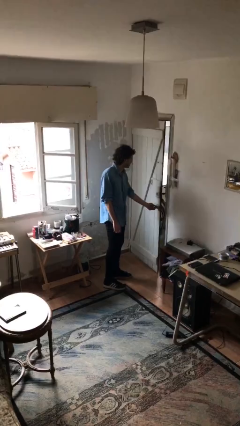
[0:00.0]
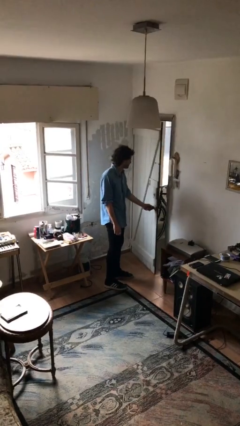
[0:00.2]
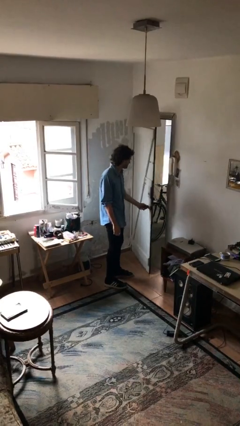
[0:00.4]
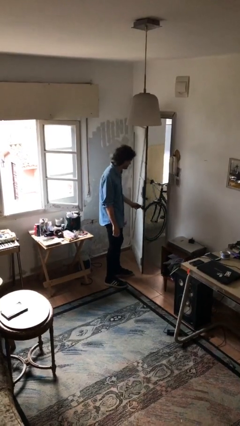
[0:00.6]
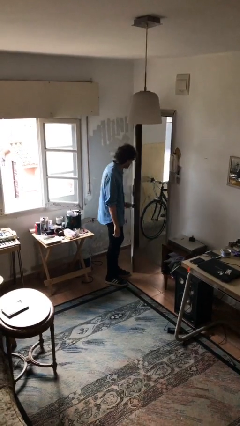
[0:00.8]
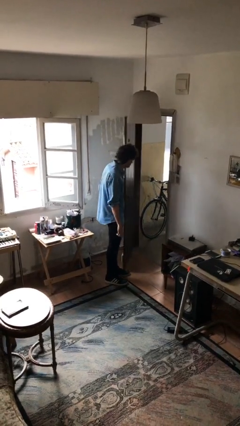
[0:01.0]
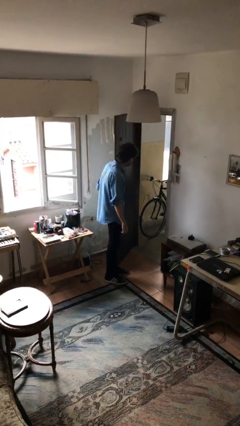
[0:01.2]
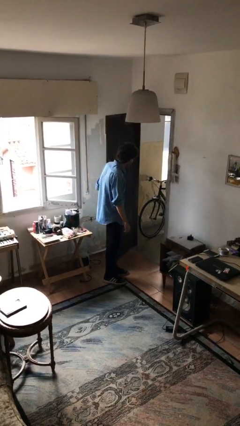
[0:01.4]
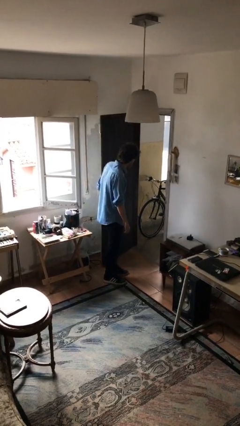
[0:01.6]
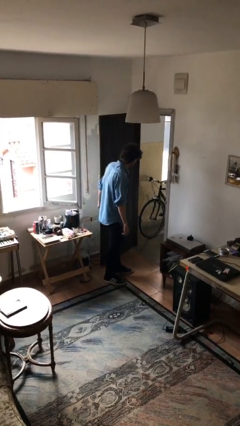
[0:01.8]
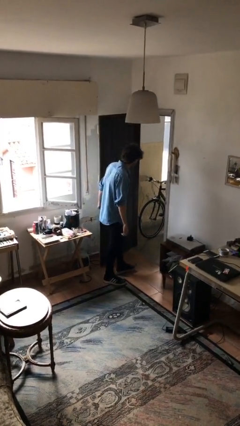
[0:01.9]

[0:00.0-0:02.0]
person opens facility door

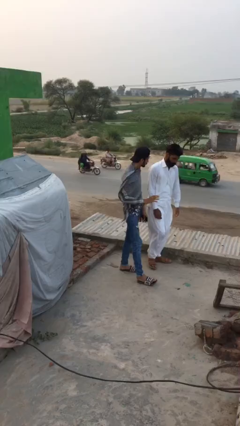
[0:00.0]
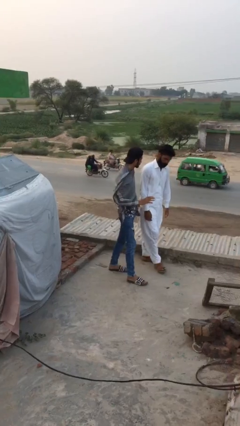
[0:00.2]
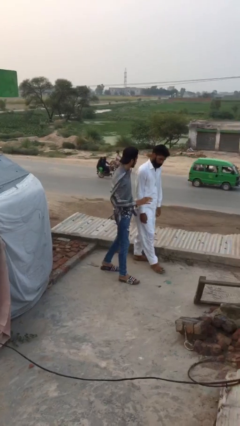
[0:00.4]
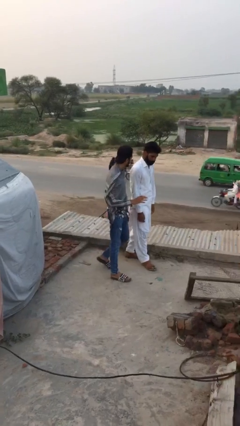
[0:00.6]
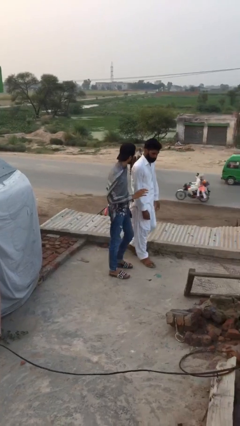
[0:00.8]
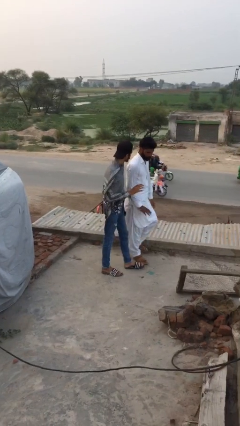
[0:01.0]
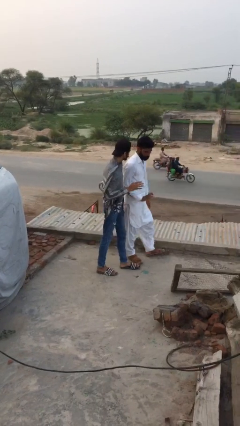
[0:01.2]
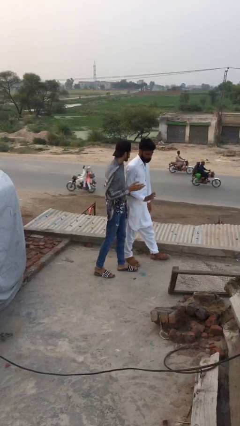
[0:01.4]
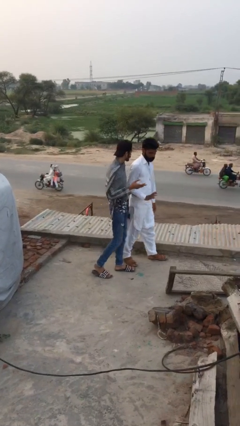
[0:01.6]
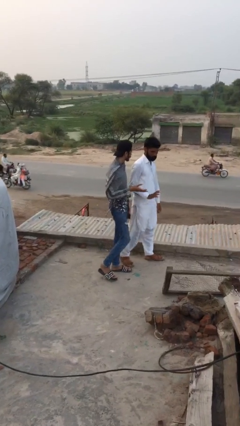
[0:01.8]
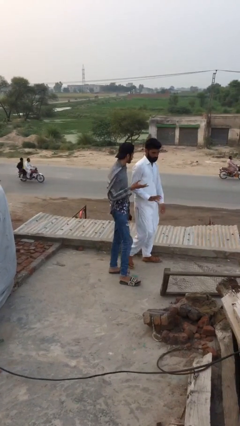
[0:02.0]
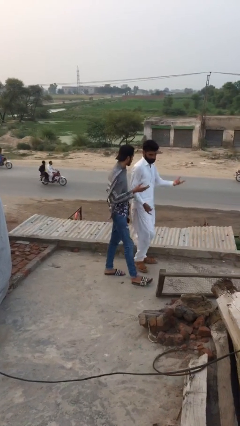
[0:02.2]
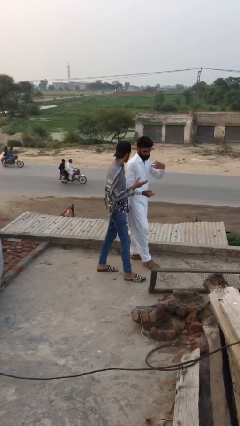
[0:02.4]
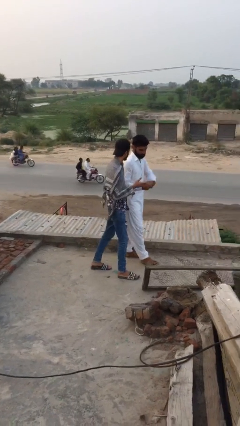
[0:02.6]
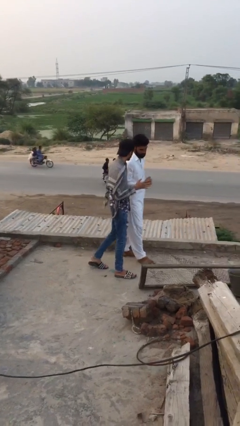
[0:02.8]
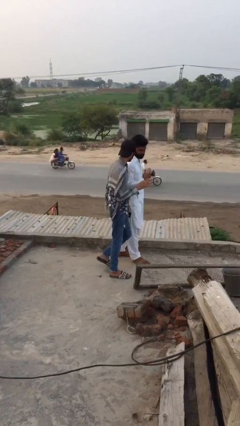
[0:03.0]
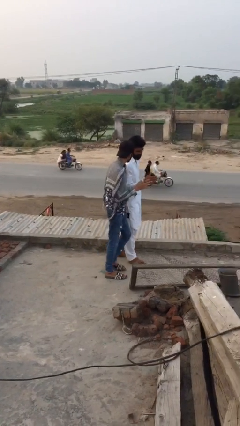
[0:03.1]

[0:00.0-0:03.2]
person talks to person

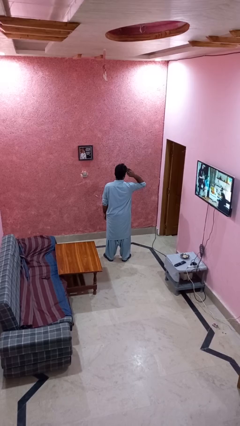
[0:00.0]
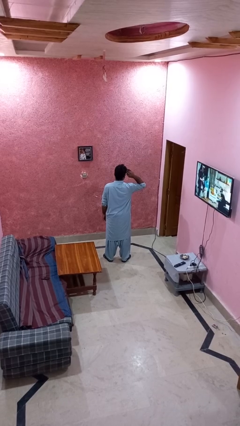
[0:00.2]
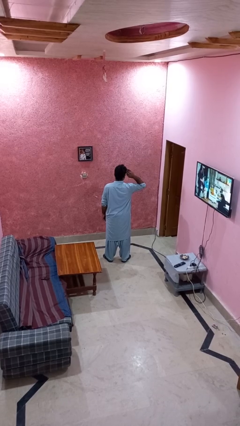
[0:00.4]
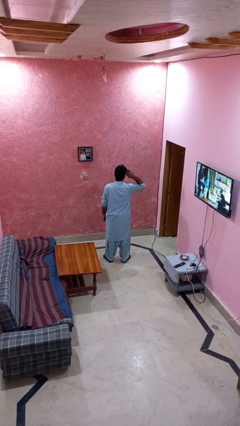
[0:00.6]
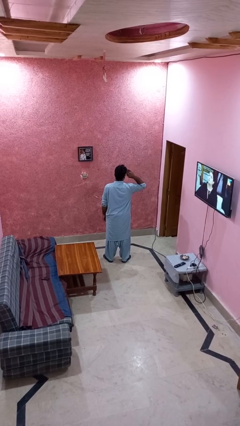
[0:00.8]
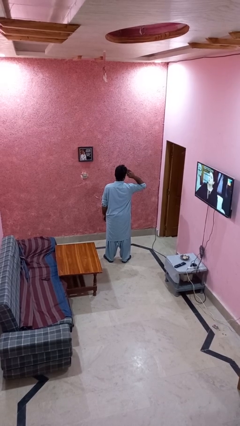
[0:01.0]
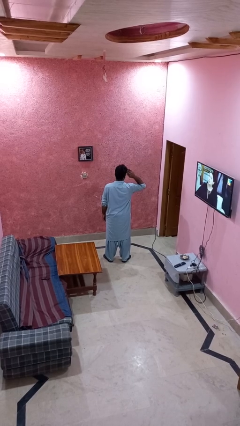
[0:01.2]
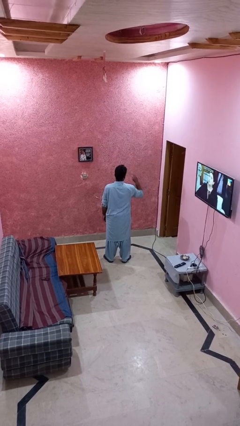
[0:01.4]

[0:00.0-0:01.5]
person salutes

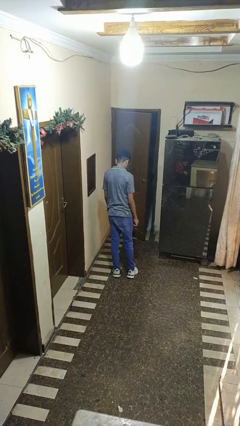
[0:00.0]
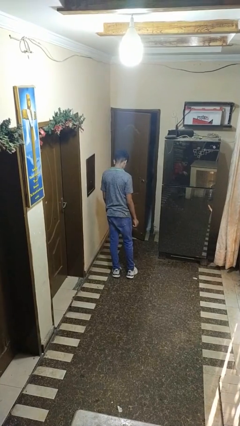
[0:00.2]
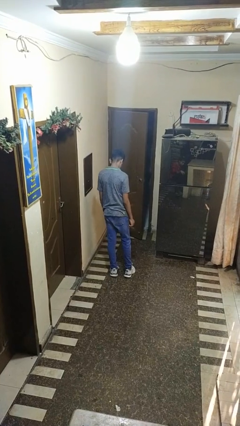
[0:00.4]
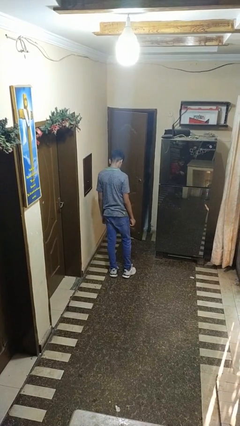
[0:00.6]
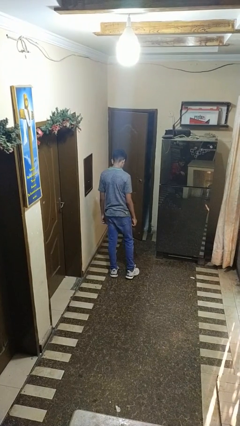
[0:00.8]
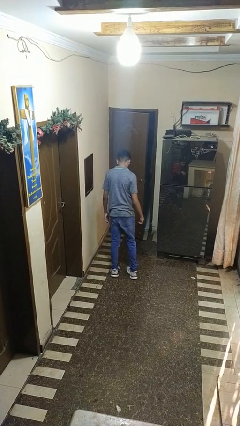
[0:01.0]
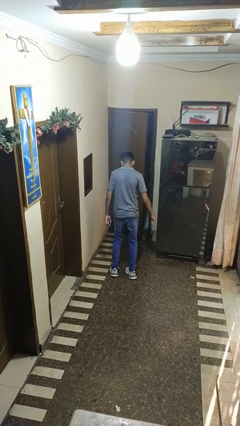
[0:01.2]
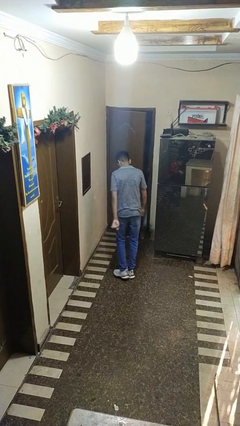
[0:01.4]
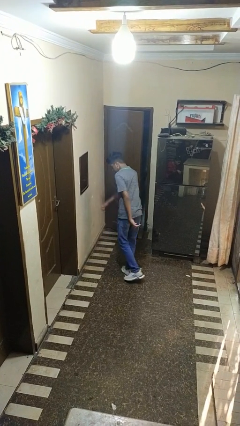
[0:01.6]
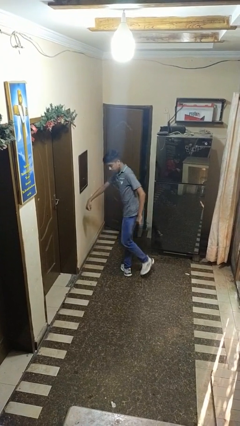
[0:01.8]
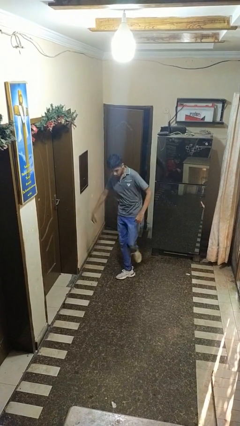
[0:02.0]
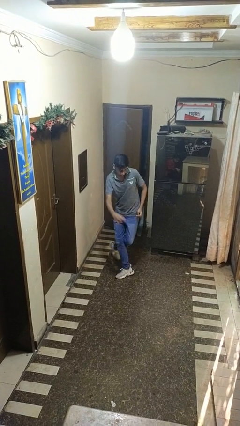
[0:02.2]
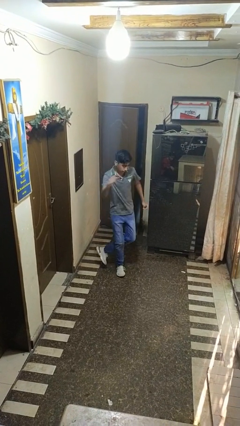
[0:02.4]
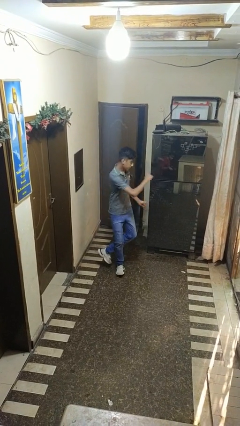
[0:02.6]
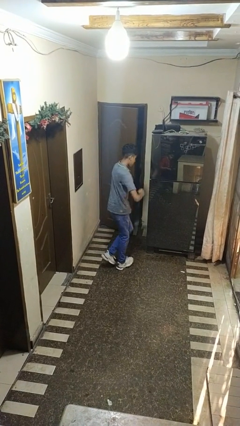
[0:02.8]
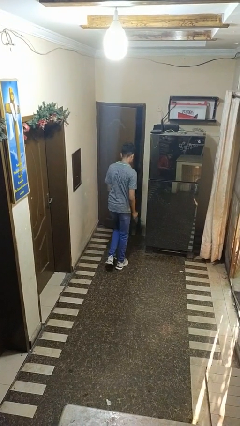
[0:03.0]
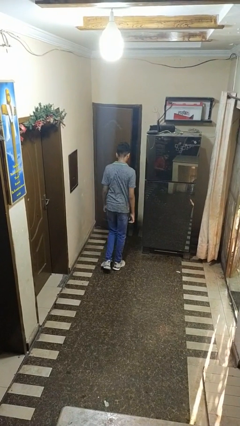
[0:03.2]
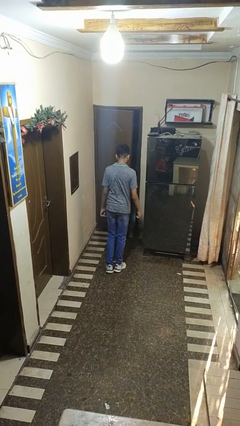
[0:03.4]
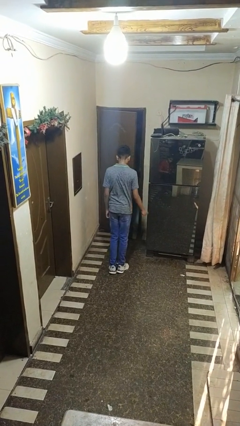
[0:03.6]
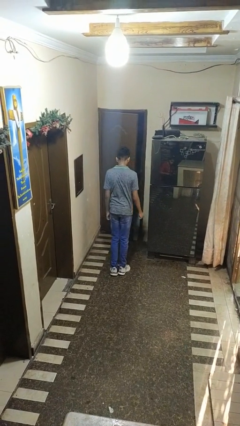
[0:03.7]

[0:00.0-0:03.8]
person twirls

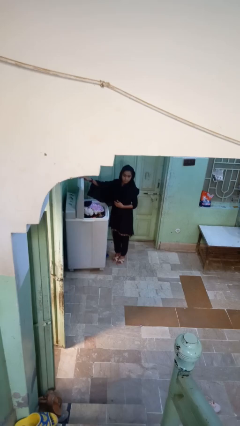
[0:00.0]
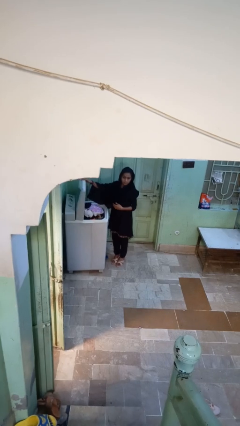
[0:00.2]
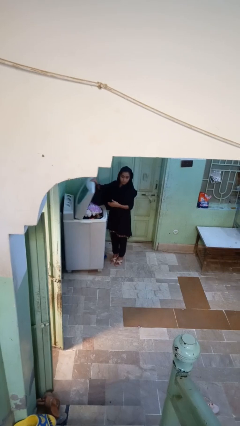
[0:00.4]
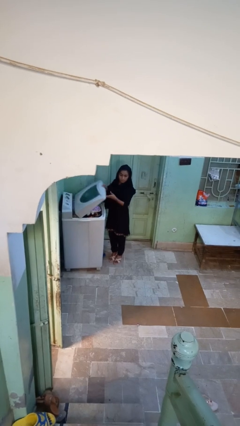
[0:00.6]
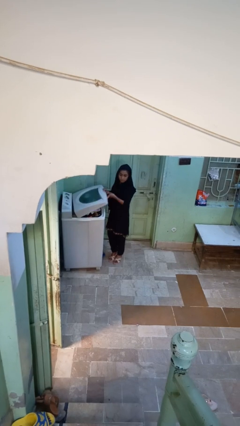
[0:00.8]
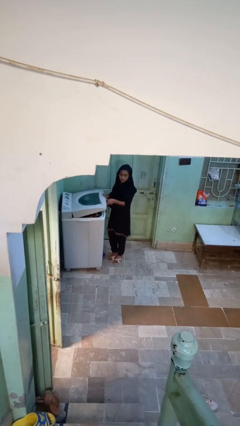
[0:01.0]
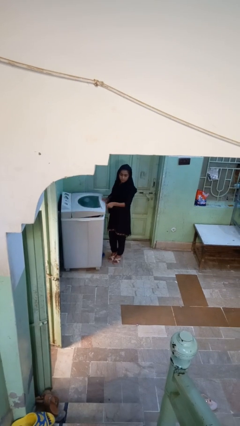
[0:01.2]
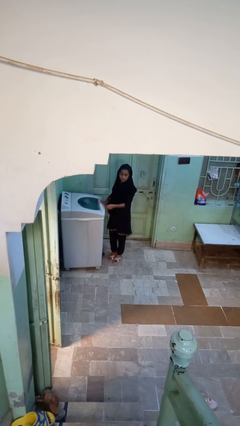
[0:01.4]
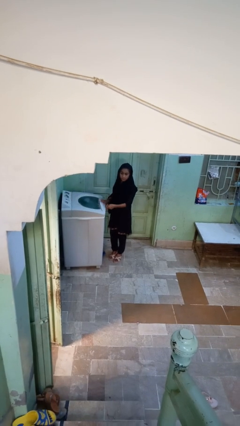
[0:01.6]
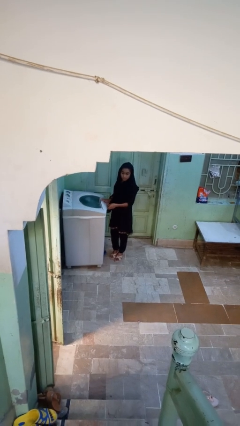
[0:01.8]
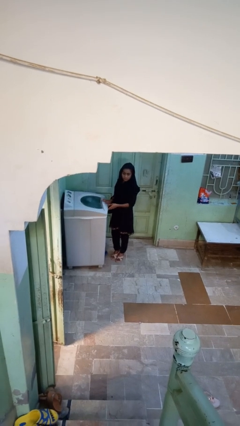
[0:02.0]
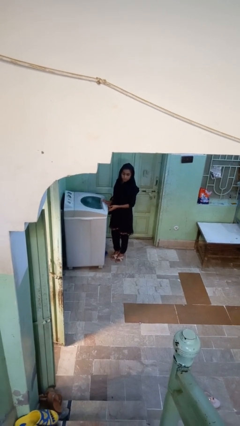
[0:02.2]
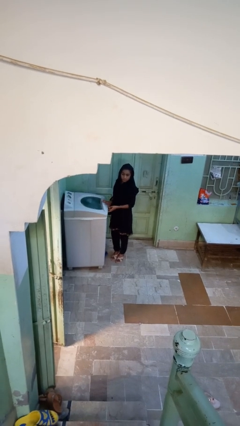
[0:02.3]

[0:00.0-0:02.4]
person closes clothes washer

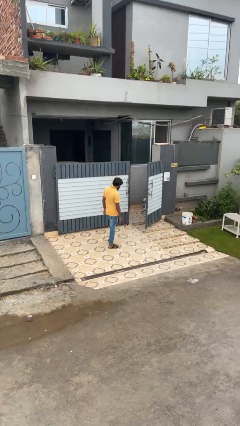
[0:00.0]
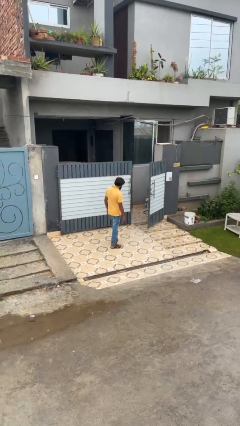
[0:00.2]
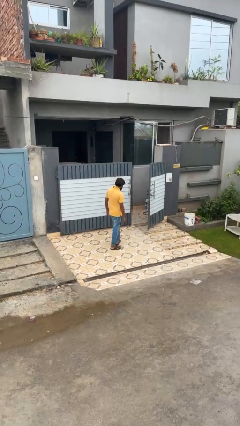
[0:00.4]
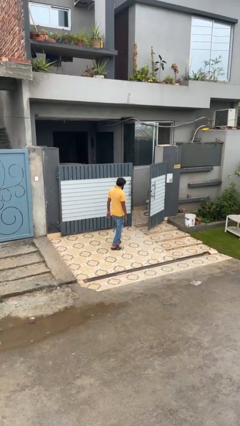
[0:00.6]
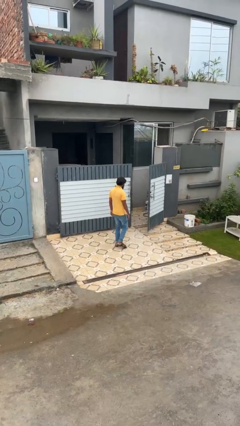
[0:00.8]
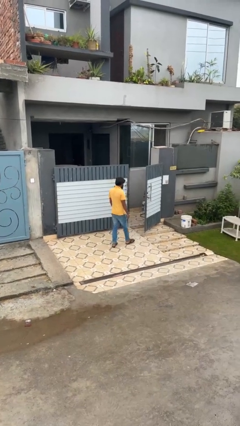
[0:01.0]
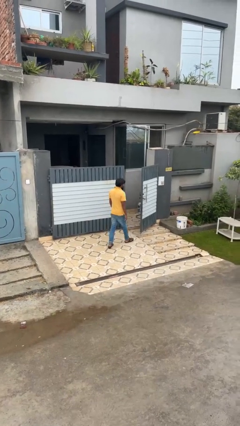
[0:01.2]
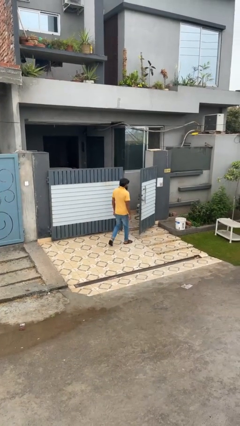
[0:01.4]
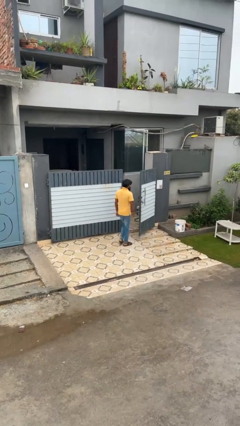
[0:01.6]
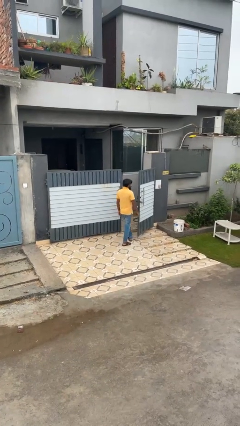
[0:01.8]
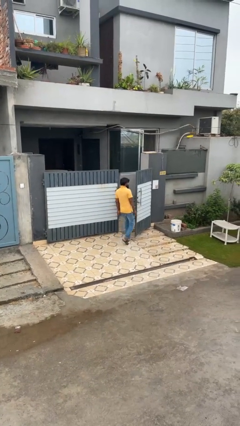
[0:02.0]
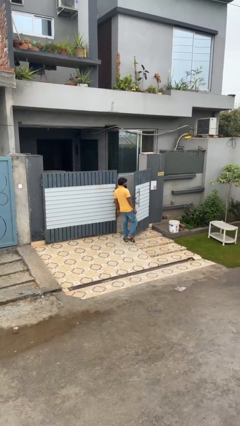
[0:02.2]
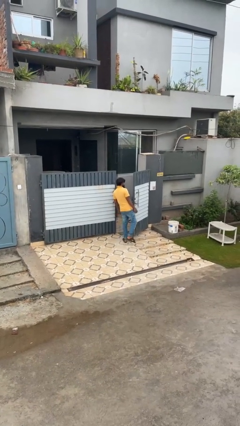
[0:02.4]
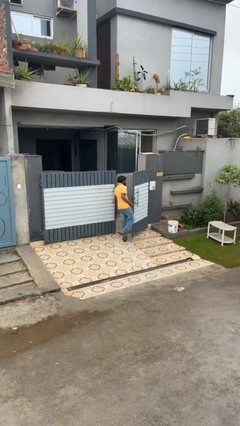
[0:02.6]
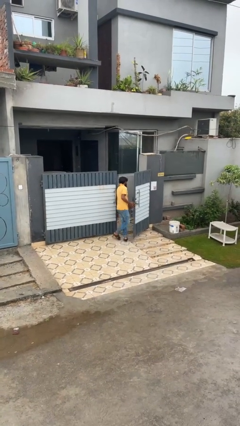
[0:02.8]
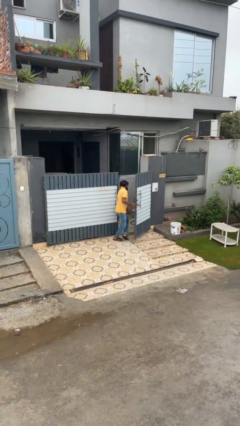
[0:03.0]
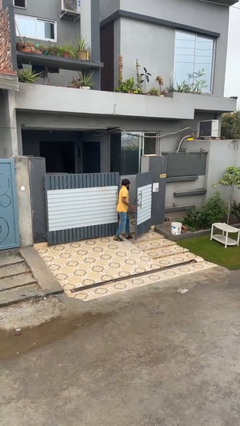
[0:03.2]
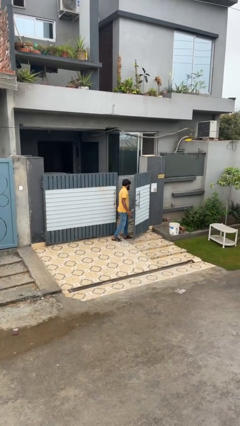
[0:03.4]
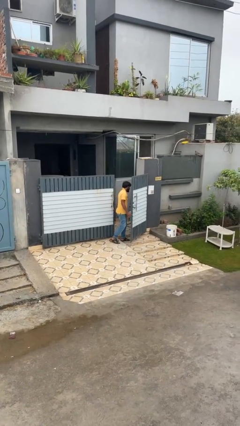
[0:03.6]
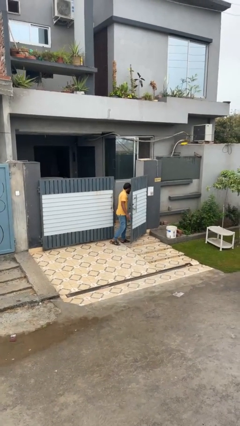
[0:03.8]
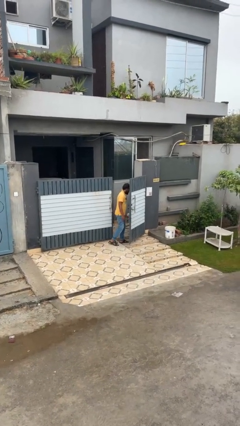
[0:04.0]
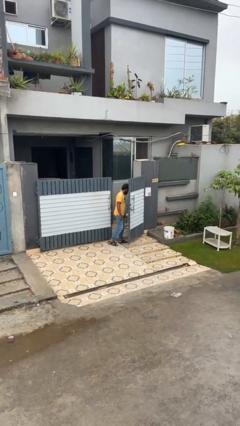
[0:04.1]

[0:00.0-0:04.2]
person bumps into wall

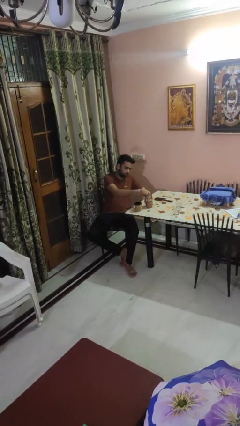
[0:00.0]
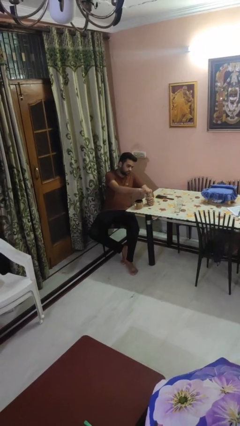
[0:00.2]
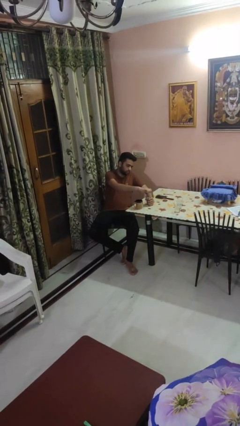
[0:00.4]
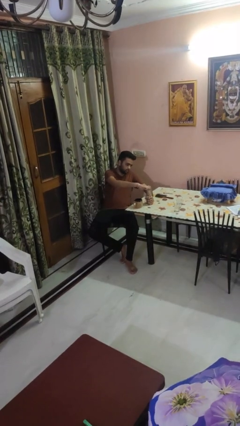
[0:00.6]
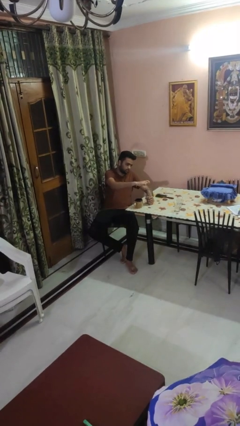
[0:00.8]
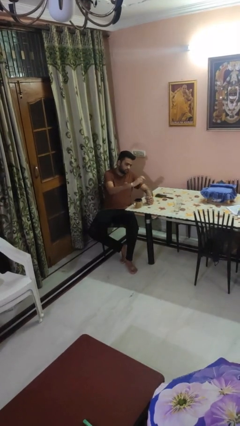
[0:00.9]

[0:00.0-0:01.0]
person unscrews lid from bottle
